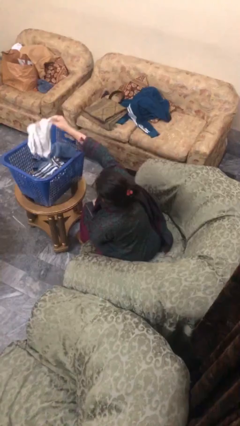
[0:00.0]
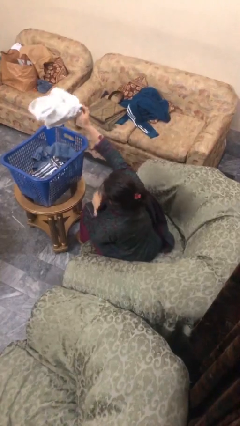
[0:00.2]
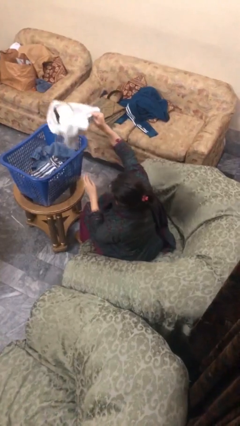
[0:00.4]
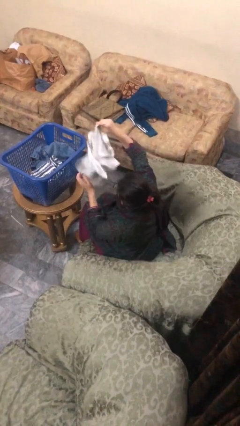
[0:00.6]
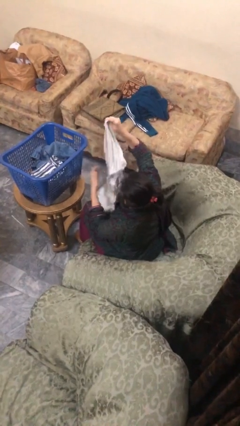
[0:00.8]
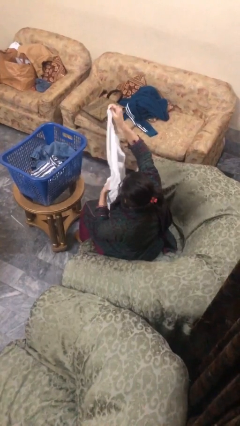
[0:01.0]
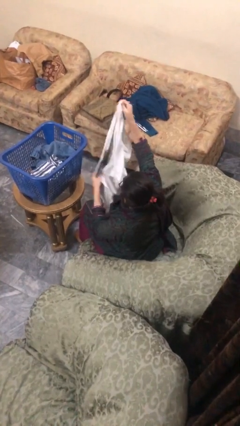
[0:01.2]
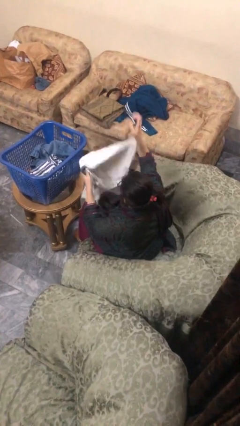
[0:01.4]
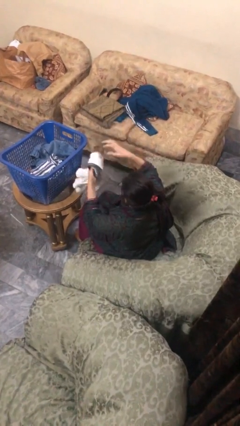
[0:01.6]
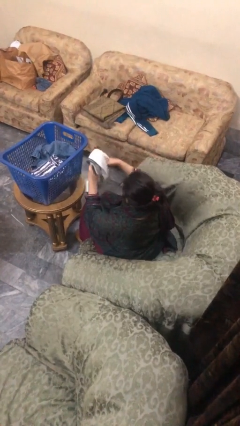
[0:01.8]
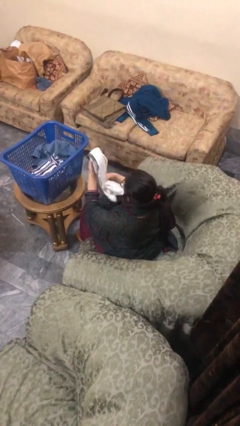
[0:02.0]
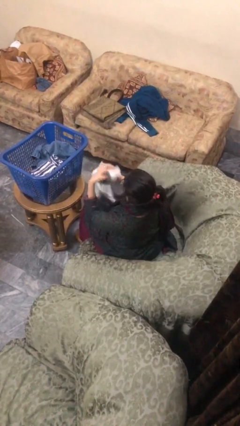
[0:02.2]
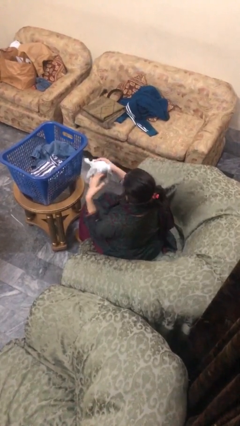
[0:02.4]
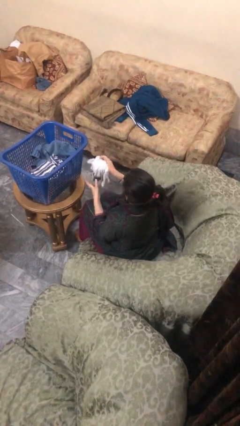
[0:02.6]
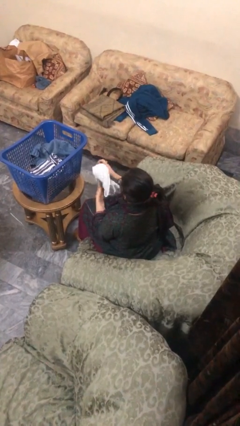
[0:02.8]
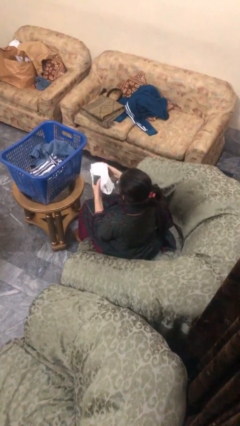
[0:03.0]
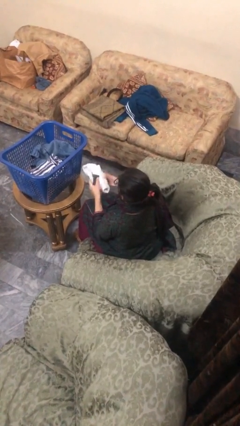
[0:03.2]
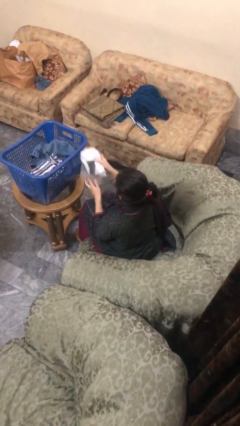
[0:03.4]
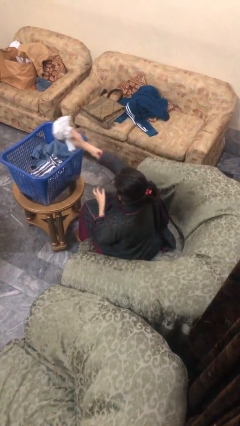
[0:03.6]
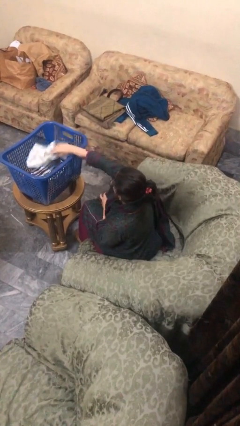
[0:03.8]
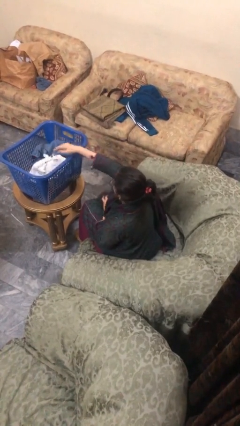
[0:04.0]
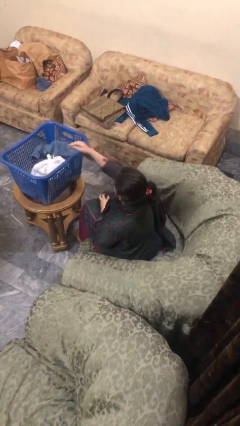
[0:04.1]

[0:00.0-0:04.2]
person folds shirt

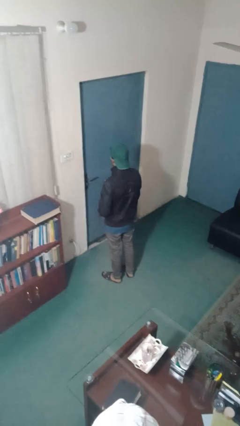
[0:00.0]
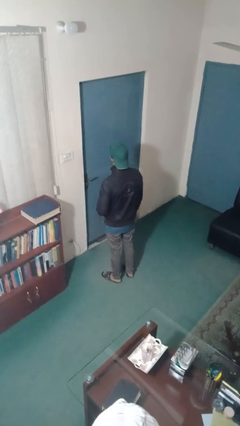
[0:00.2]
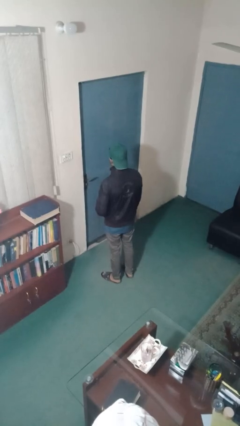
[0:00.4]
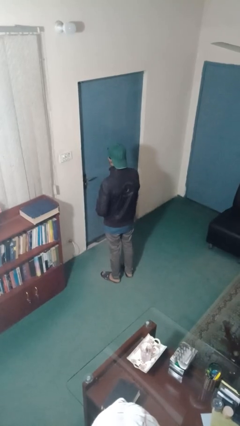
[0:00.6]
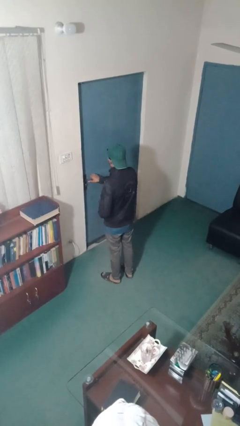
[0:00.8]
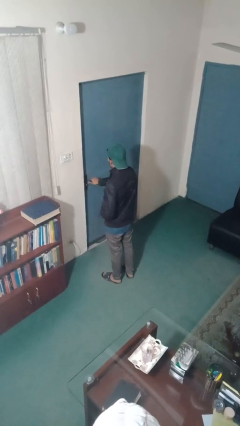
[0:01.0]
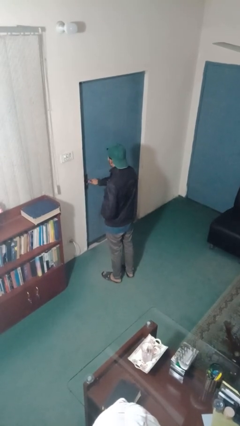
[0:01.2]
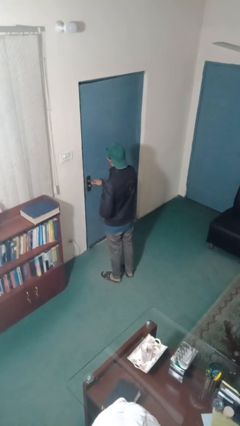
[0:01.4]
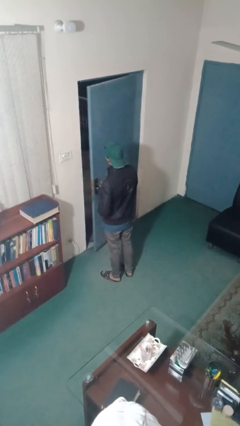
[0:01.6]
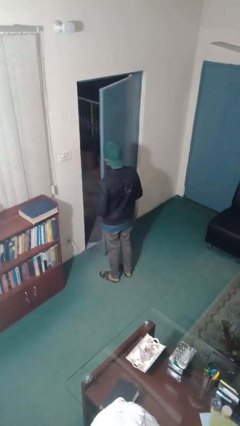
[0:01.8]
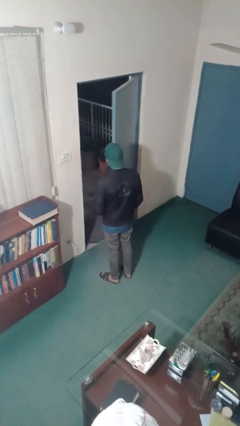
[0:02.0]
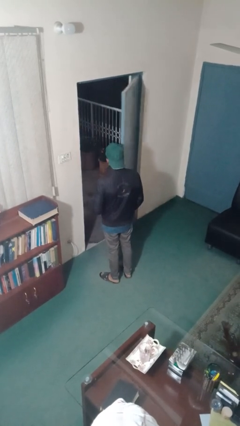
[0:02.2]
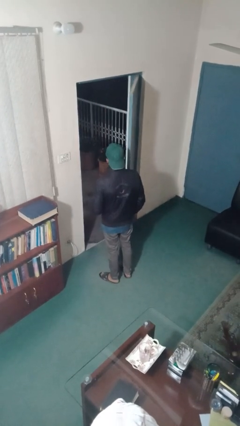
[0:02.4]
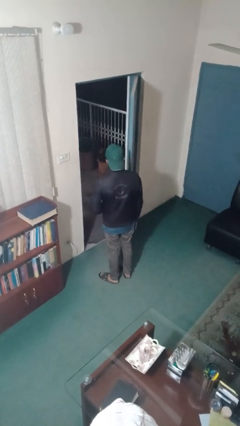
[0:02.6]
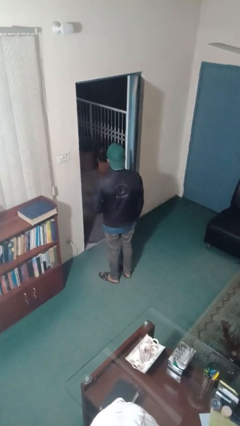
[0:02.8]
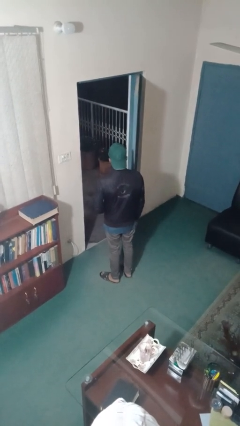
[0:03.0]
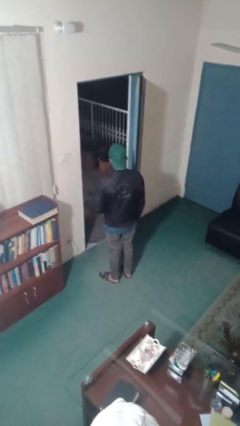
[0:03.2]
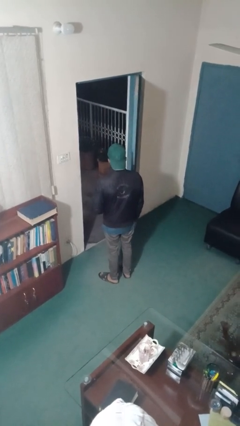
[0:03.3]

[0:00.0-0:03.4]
person opens facility door

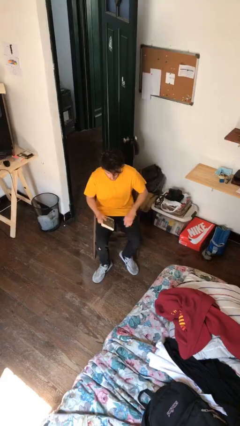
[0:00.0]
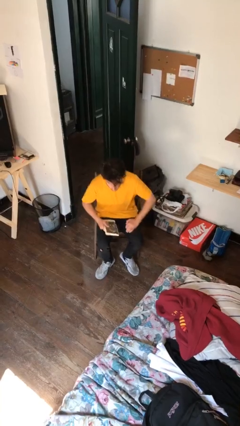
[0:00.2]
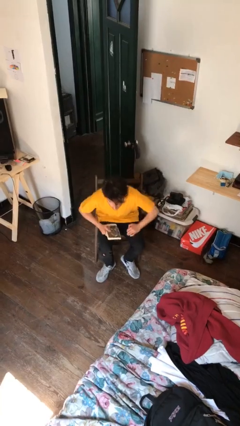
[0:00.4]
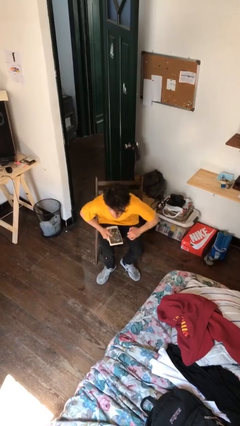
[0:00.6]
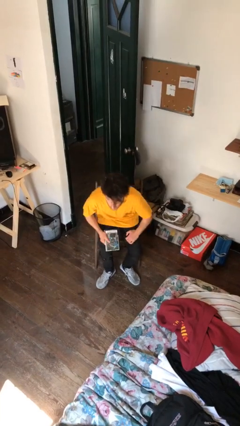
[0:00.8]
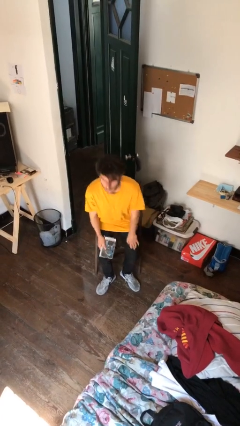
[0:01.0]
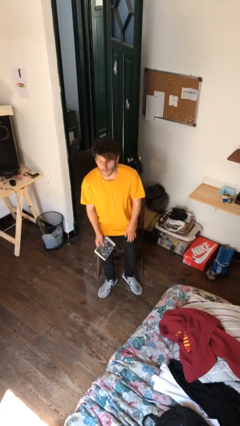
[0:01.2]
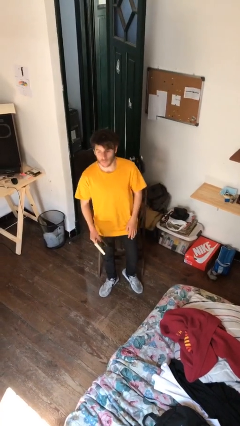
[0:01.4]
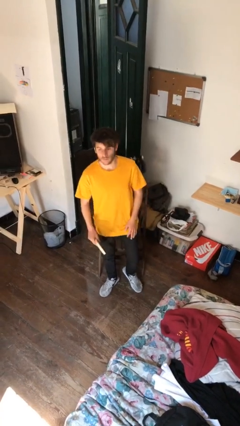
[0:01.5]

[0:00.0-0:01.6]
person stands up

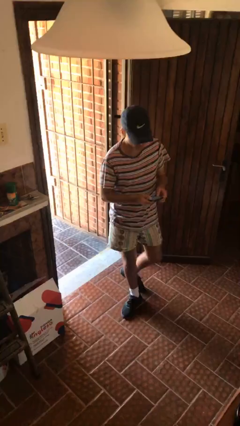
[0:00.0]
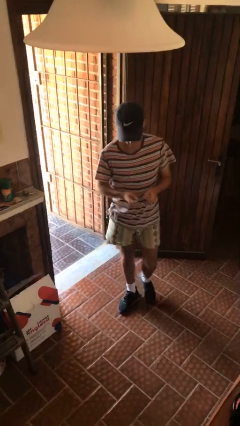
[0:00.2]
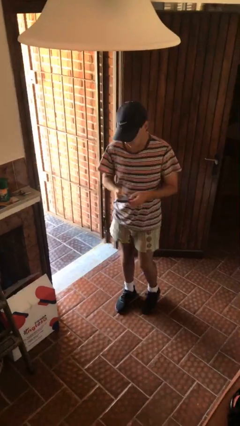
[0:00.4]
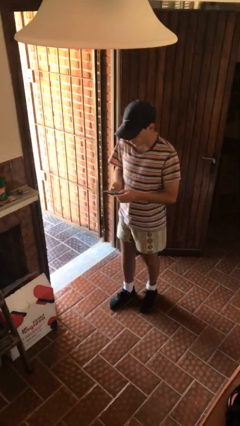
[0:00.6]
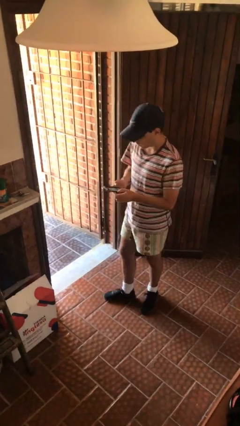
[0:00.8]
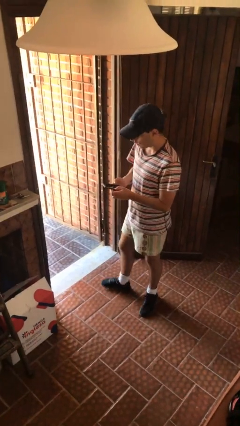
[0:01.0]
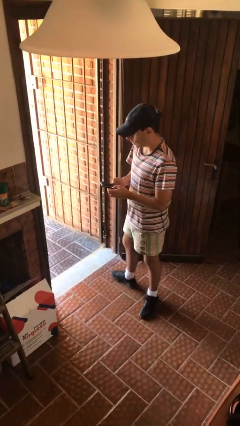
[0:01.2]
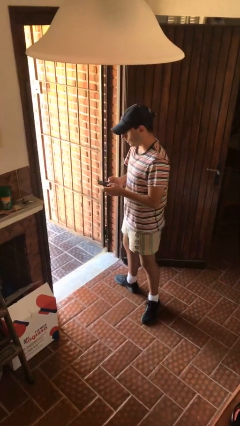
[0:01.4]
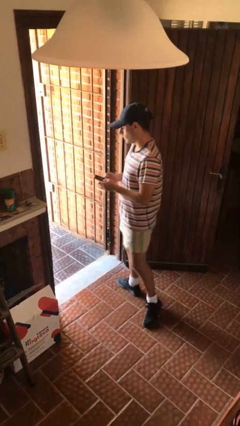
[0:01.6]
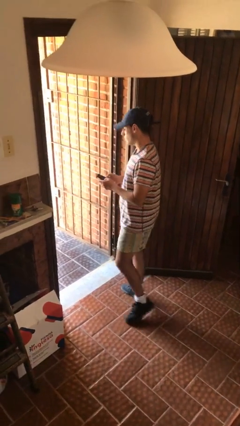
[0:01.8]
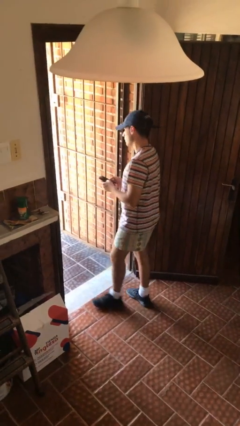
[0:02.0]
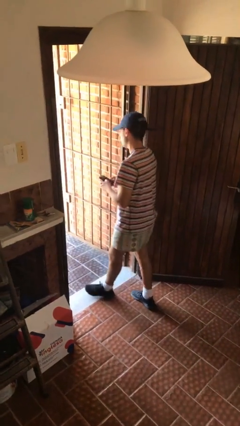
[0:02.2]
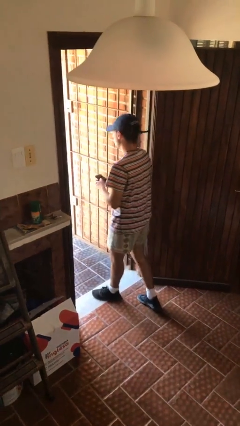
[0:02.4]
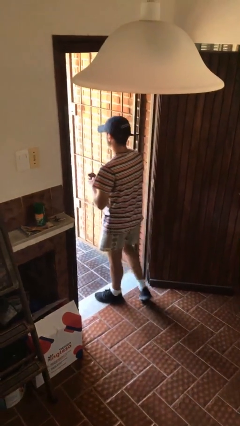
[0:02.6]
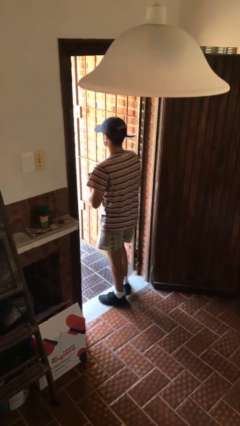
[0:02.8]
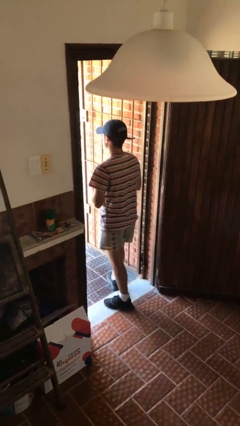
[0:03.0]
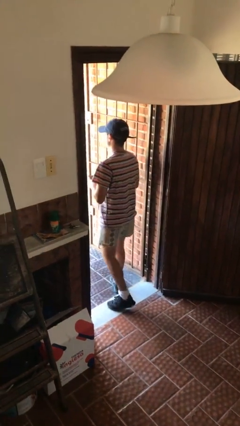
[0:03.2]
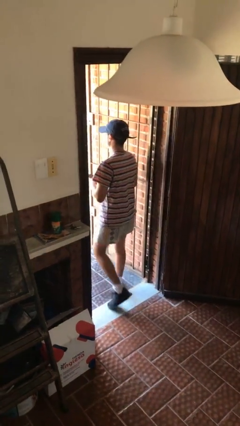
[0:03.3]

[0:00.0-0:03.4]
person exits scene through structure

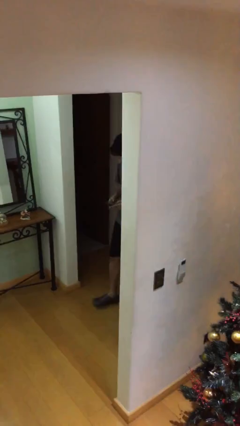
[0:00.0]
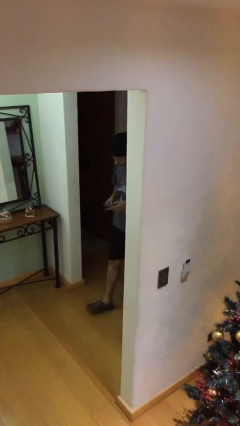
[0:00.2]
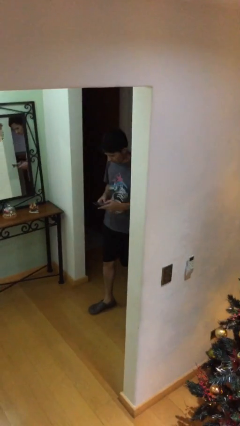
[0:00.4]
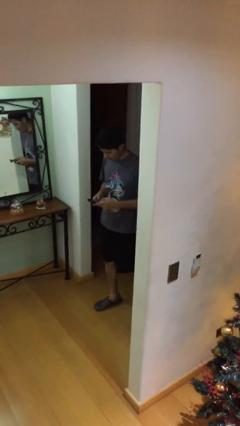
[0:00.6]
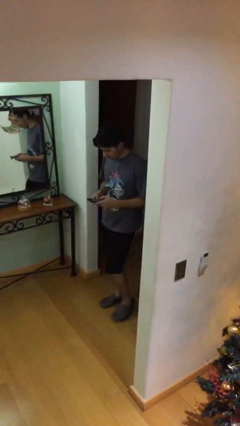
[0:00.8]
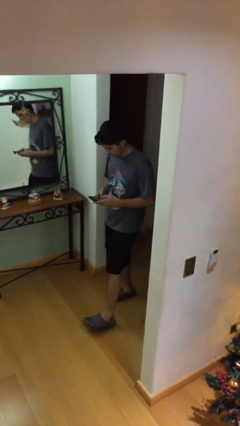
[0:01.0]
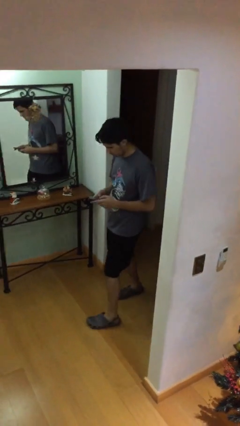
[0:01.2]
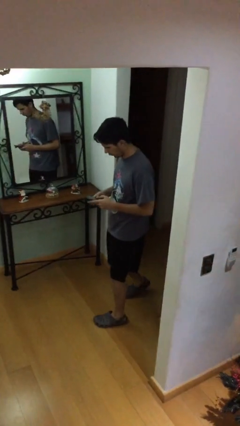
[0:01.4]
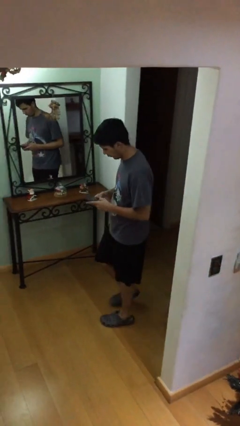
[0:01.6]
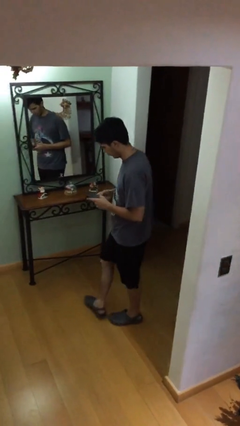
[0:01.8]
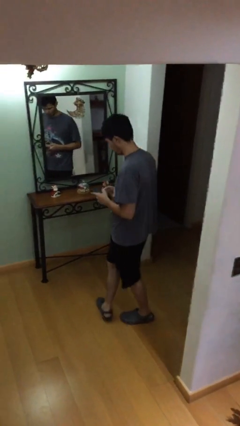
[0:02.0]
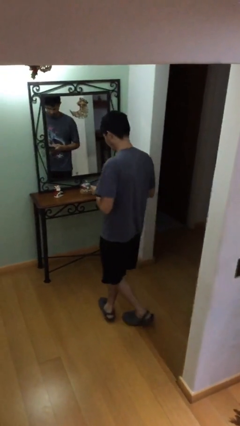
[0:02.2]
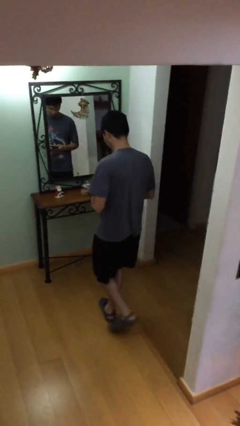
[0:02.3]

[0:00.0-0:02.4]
person enters scene through structure

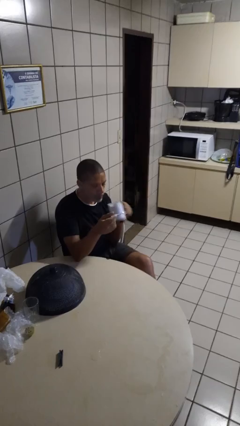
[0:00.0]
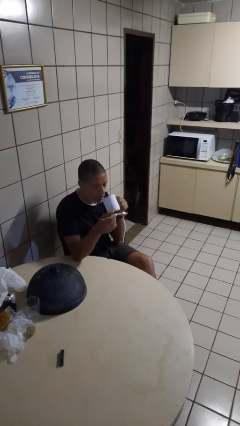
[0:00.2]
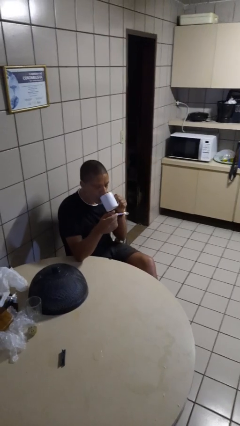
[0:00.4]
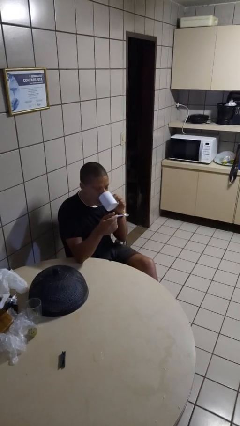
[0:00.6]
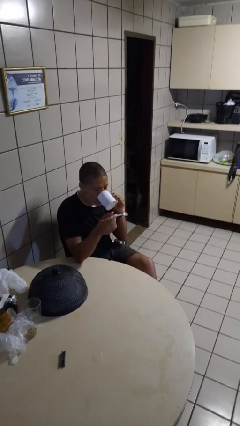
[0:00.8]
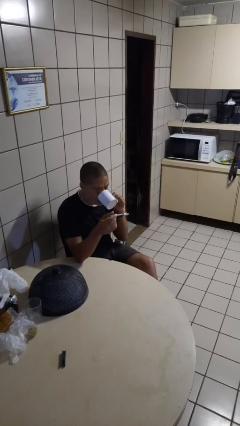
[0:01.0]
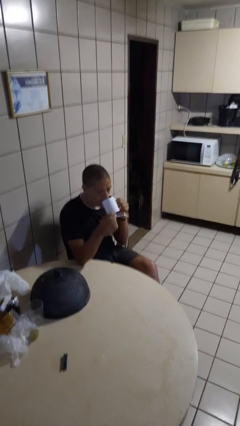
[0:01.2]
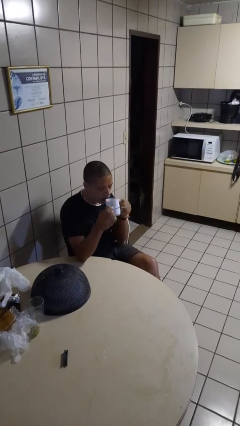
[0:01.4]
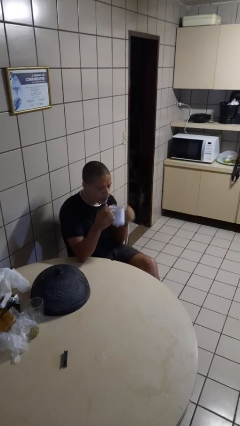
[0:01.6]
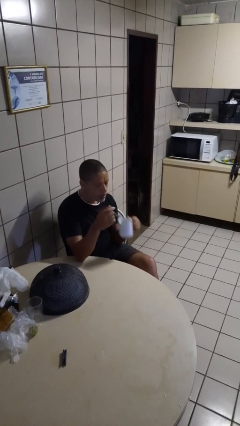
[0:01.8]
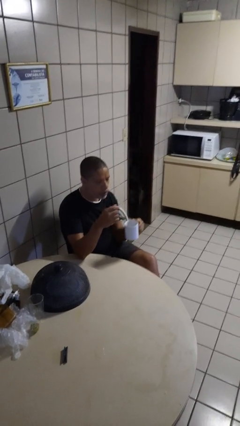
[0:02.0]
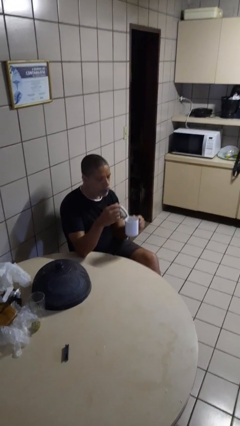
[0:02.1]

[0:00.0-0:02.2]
person drinks from mug
